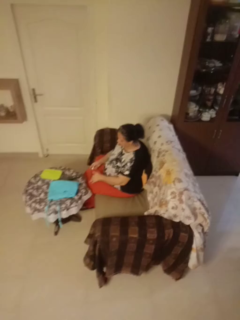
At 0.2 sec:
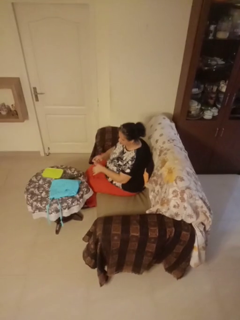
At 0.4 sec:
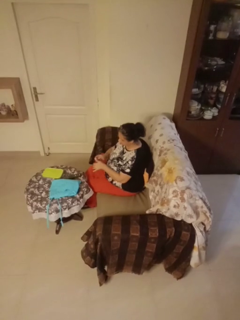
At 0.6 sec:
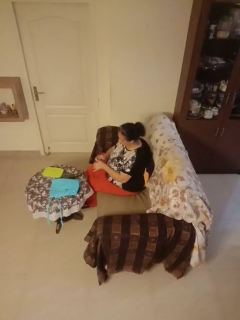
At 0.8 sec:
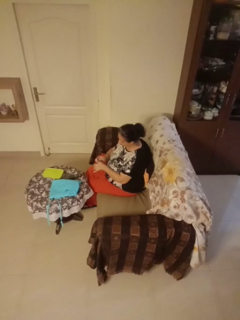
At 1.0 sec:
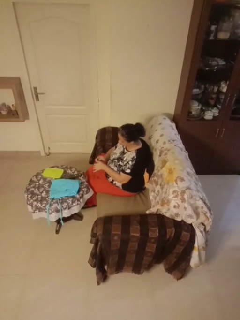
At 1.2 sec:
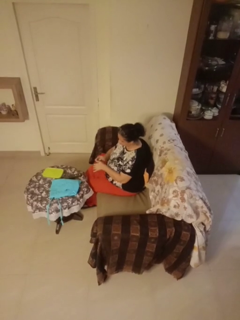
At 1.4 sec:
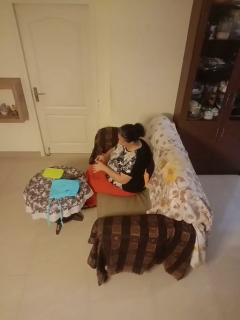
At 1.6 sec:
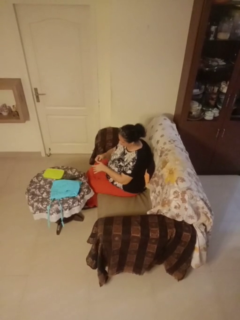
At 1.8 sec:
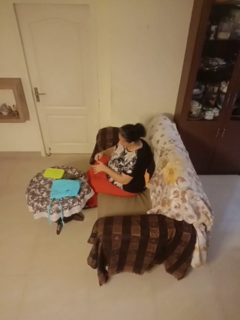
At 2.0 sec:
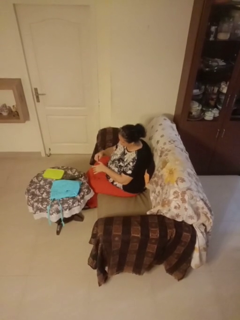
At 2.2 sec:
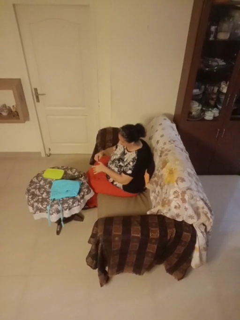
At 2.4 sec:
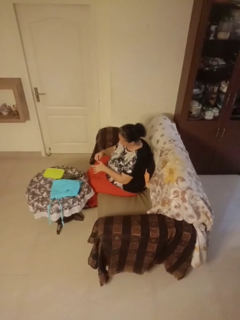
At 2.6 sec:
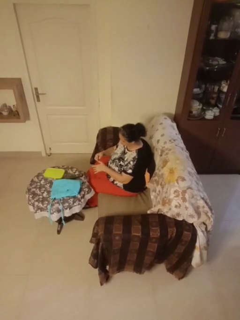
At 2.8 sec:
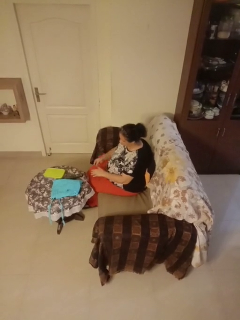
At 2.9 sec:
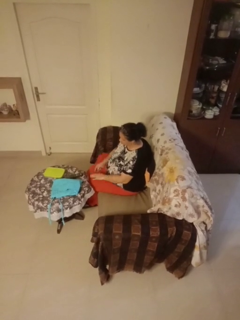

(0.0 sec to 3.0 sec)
person files fingernails

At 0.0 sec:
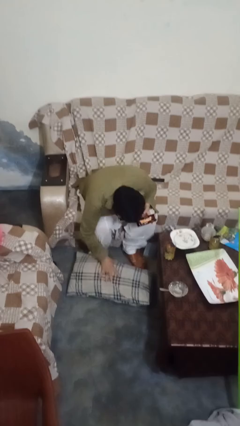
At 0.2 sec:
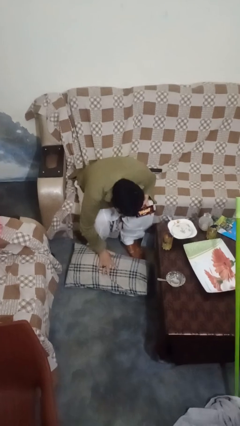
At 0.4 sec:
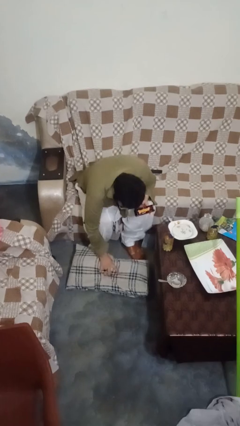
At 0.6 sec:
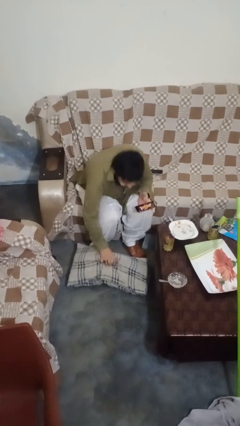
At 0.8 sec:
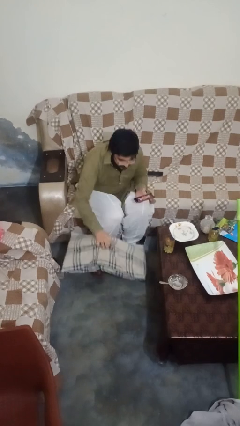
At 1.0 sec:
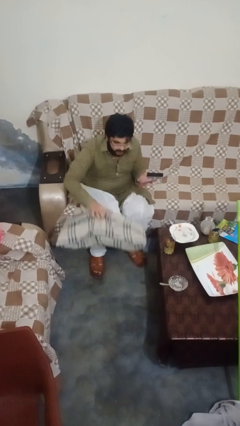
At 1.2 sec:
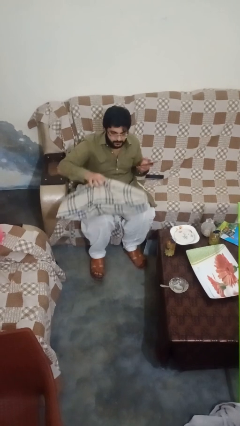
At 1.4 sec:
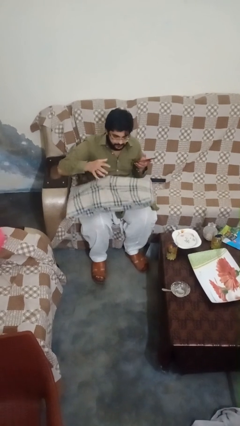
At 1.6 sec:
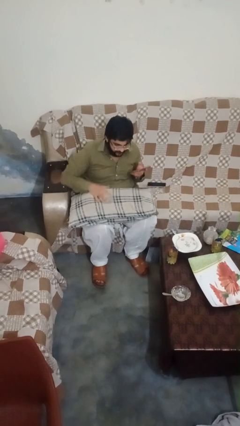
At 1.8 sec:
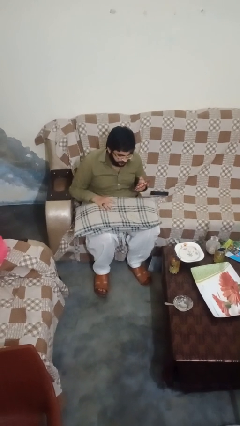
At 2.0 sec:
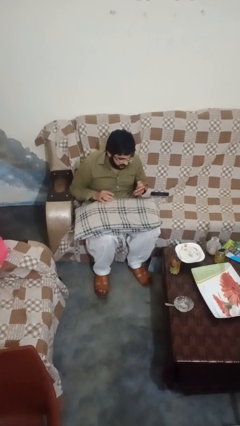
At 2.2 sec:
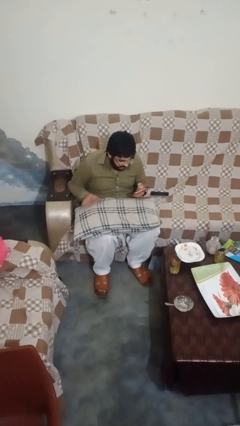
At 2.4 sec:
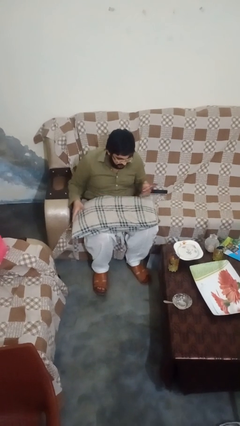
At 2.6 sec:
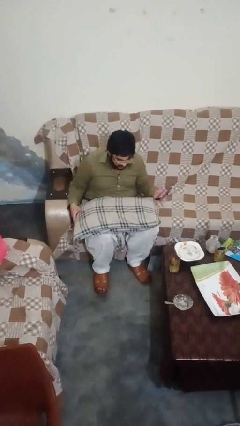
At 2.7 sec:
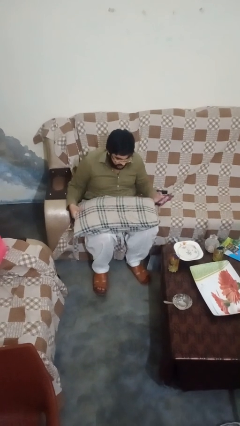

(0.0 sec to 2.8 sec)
person picks up object from floor

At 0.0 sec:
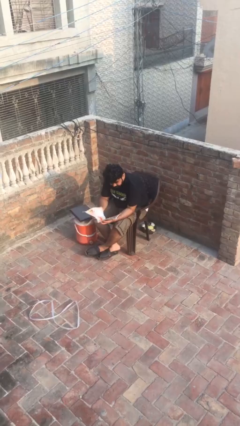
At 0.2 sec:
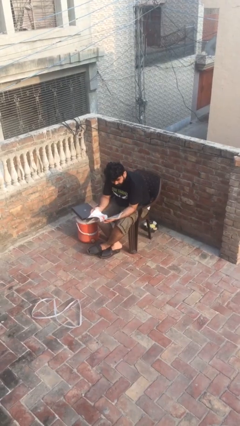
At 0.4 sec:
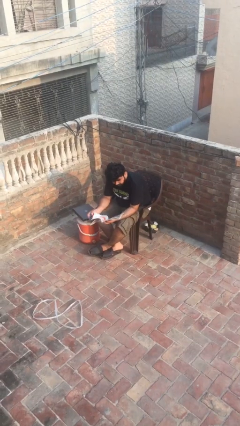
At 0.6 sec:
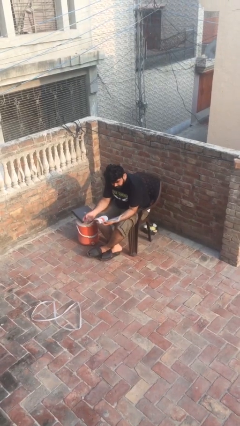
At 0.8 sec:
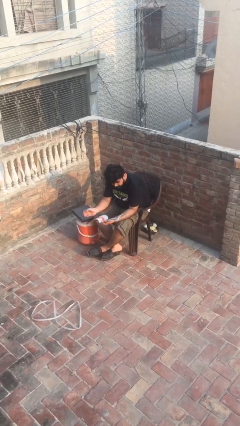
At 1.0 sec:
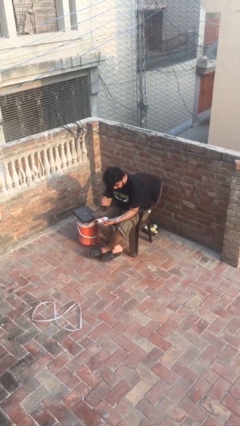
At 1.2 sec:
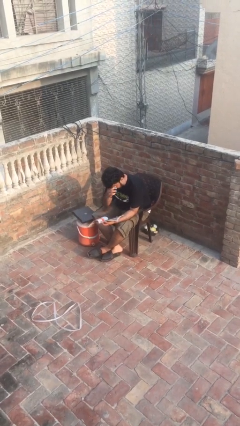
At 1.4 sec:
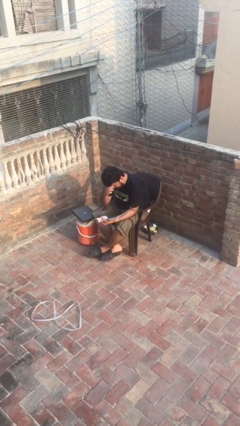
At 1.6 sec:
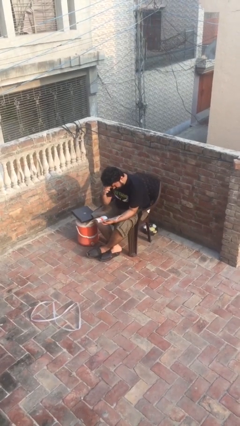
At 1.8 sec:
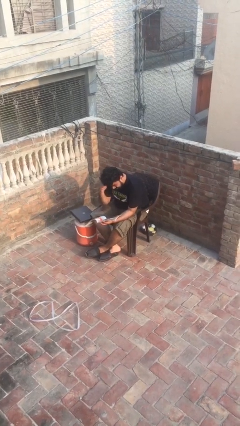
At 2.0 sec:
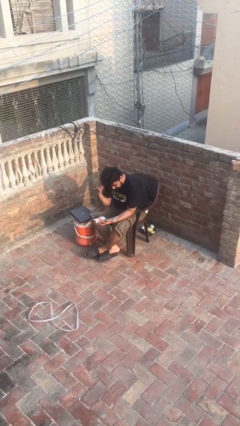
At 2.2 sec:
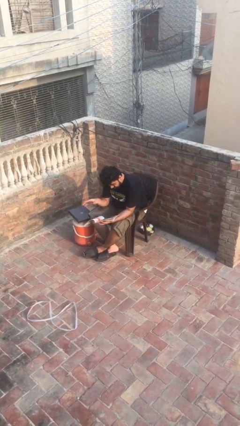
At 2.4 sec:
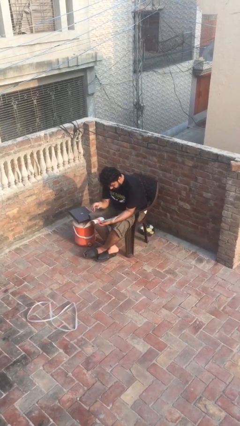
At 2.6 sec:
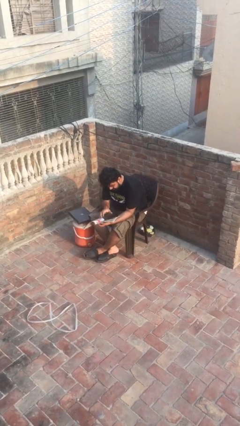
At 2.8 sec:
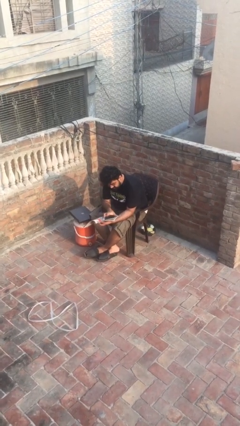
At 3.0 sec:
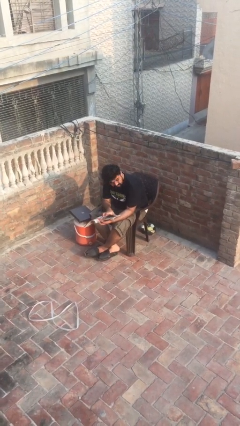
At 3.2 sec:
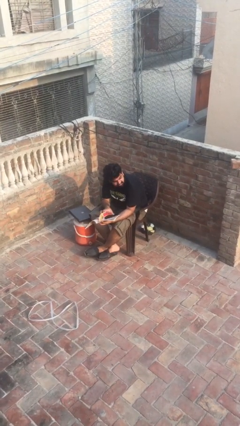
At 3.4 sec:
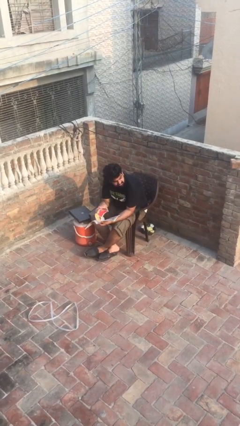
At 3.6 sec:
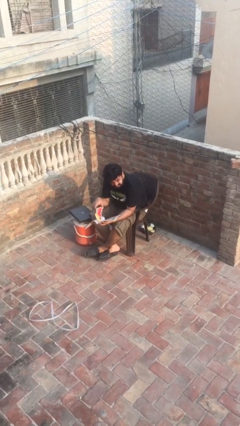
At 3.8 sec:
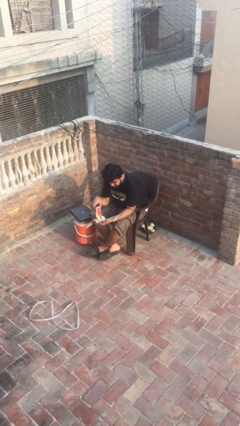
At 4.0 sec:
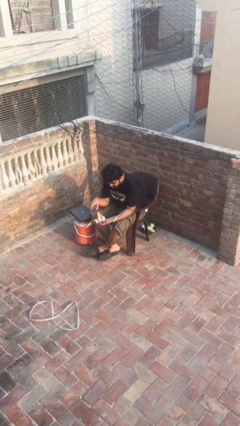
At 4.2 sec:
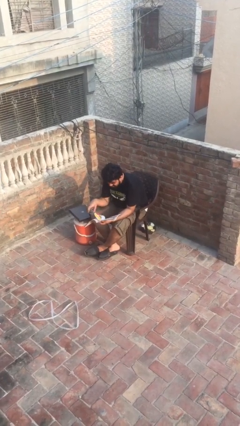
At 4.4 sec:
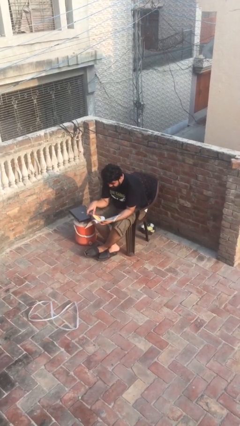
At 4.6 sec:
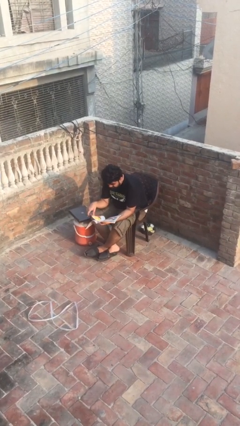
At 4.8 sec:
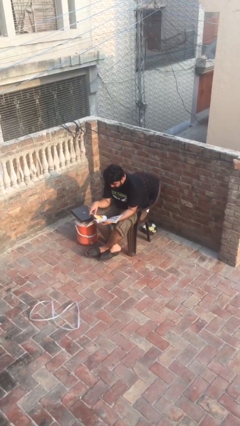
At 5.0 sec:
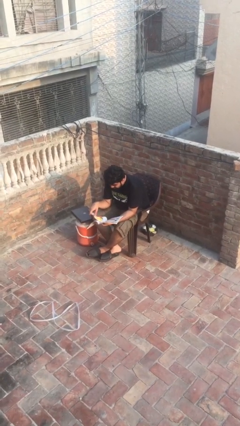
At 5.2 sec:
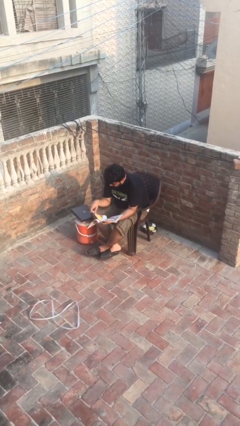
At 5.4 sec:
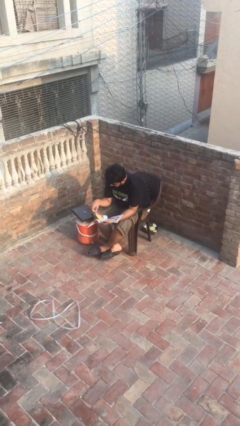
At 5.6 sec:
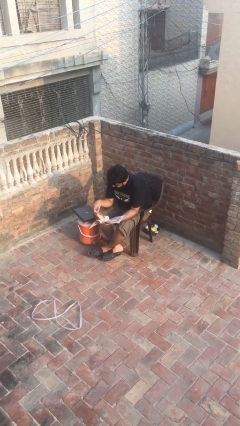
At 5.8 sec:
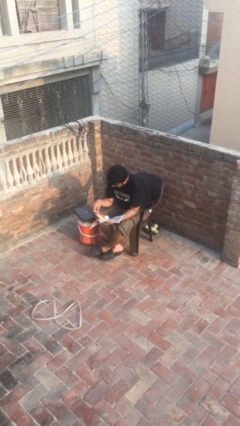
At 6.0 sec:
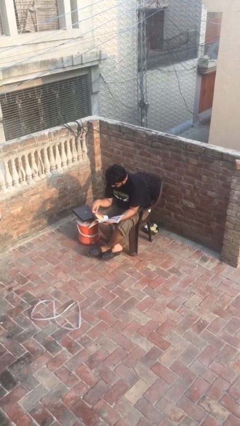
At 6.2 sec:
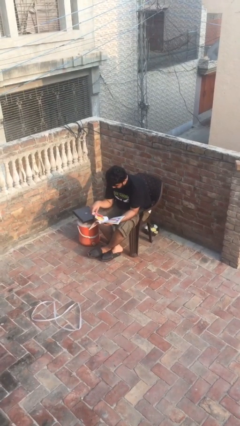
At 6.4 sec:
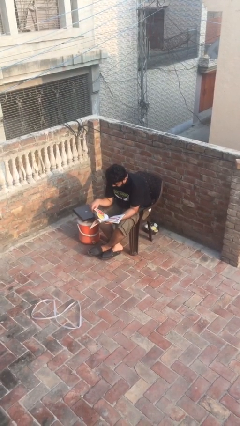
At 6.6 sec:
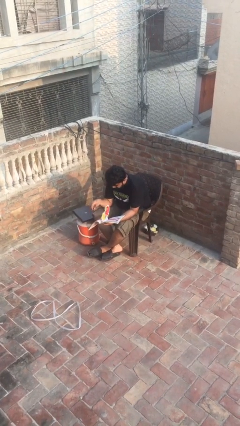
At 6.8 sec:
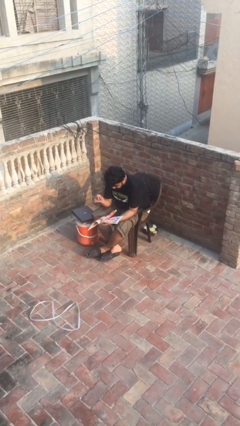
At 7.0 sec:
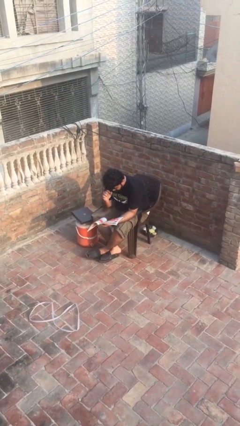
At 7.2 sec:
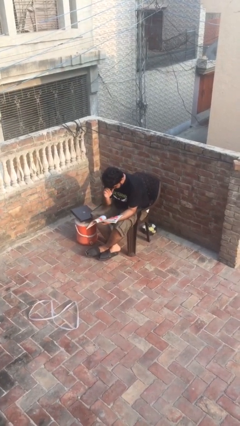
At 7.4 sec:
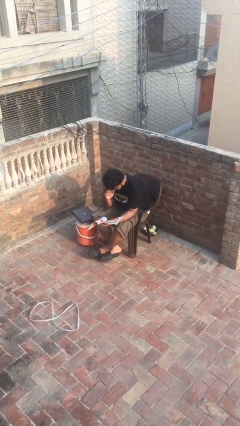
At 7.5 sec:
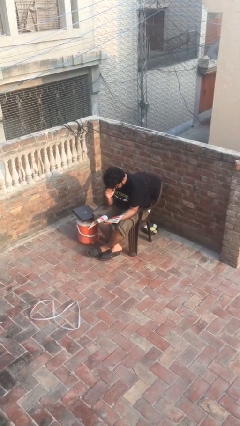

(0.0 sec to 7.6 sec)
person reads document

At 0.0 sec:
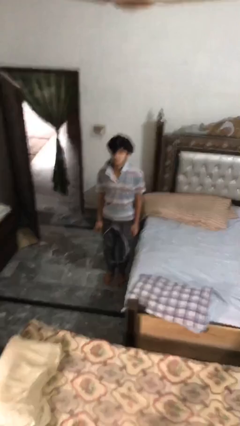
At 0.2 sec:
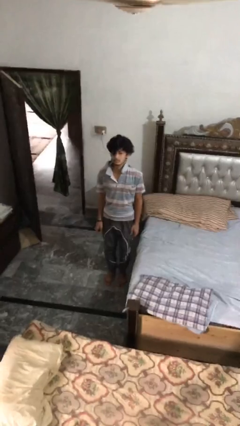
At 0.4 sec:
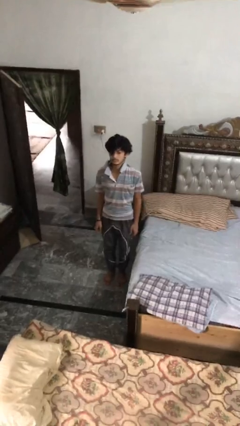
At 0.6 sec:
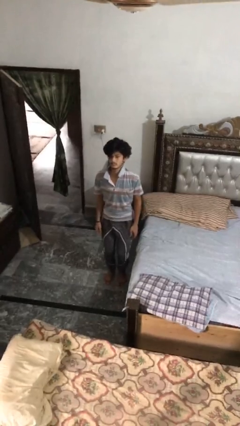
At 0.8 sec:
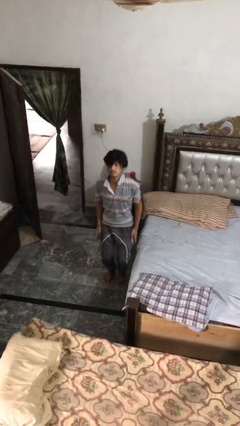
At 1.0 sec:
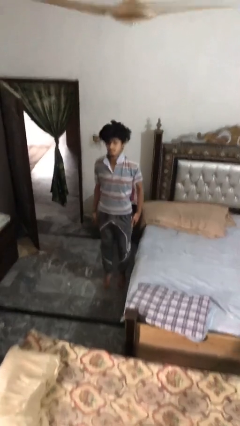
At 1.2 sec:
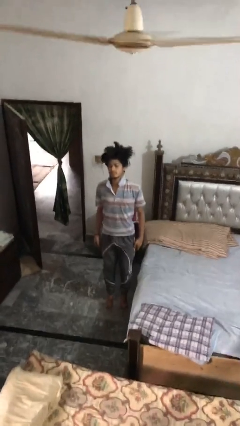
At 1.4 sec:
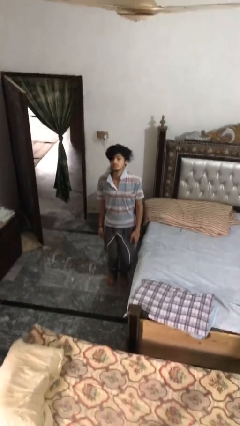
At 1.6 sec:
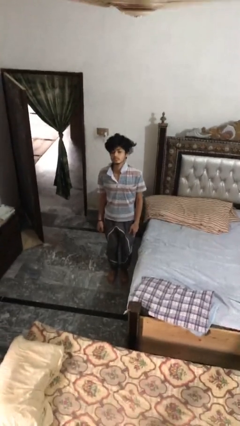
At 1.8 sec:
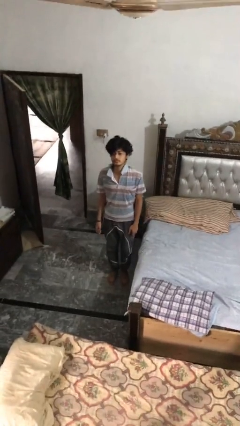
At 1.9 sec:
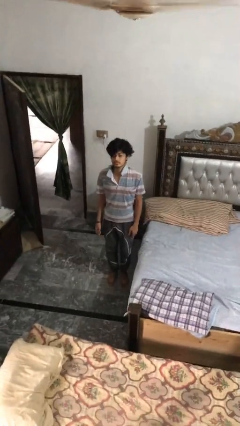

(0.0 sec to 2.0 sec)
person jumps

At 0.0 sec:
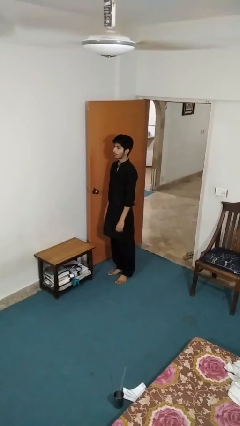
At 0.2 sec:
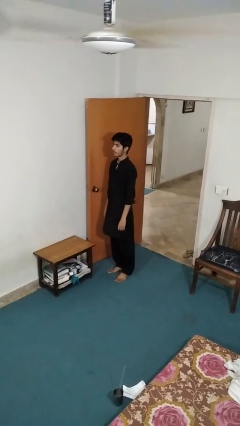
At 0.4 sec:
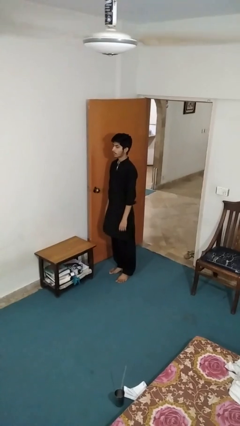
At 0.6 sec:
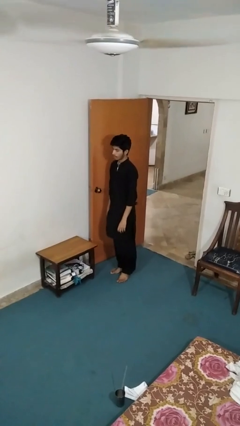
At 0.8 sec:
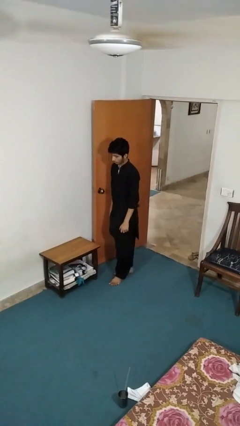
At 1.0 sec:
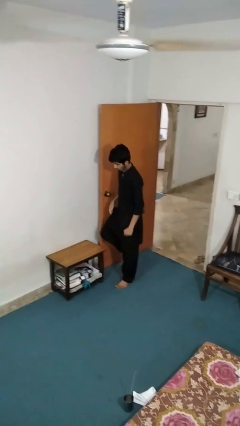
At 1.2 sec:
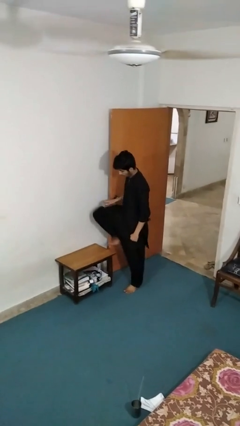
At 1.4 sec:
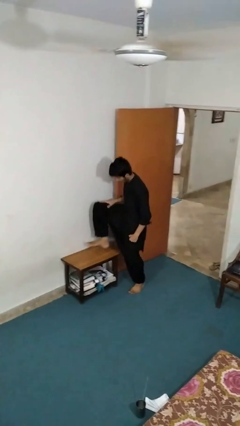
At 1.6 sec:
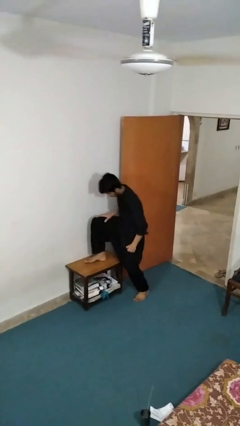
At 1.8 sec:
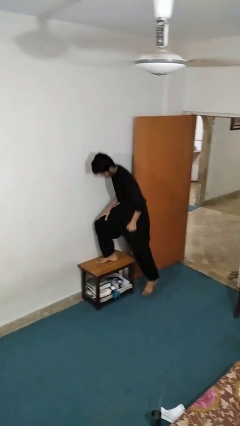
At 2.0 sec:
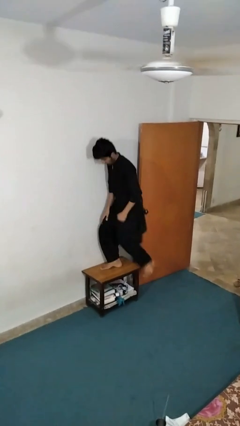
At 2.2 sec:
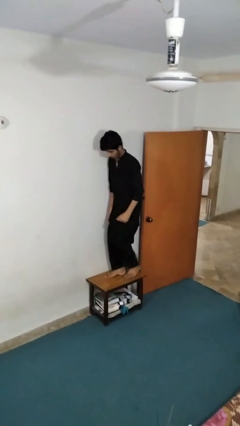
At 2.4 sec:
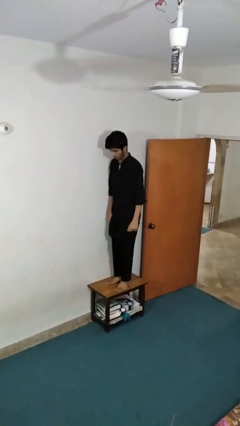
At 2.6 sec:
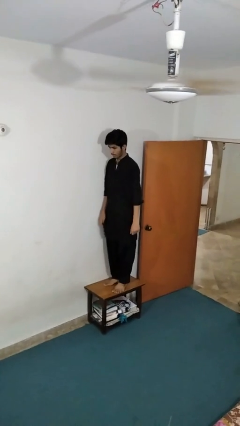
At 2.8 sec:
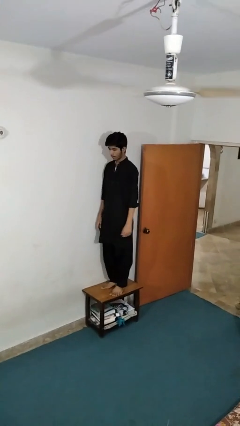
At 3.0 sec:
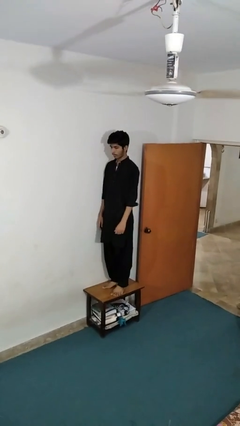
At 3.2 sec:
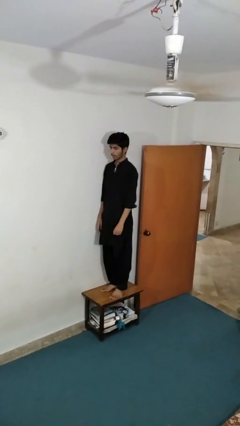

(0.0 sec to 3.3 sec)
person climbs on table
